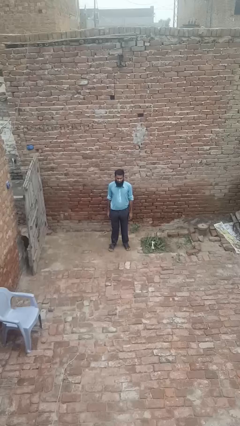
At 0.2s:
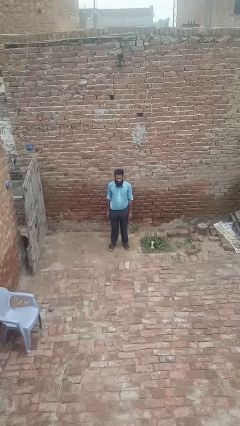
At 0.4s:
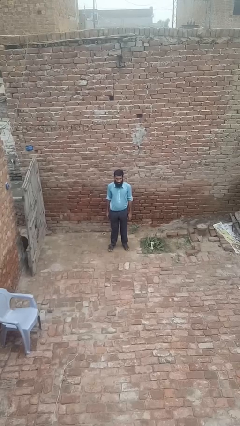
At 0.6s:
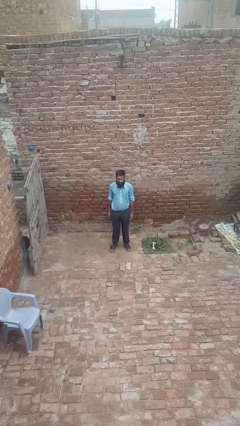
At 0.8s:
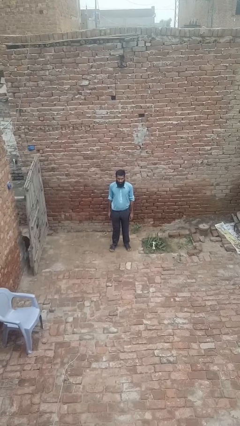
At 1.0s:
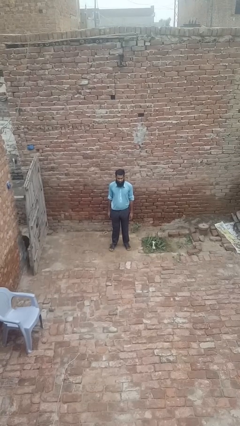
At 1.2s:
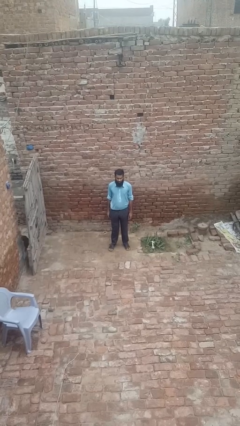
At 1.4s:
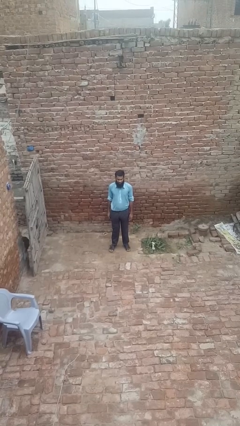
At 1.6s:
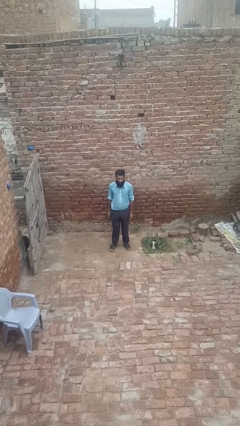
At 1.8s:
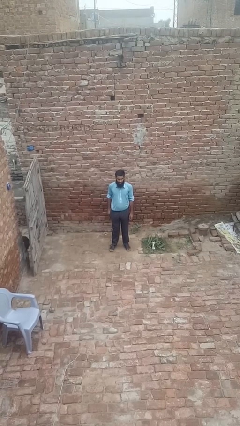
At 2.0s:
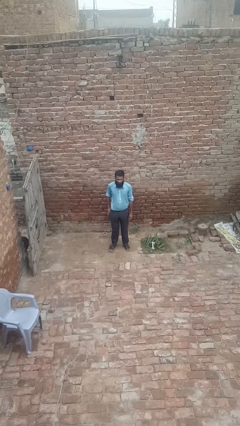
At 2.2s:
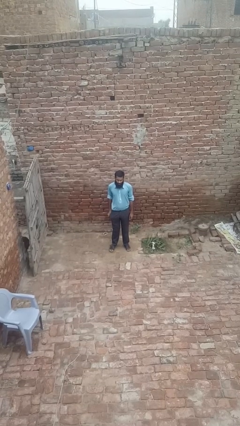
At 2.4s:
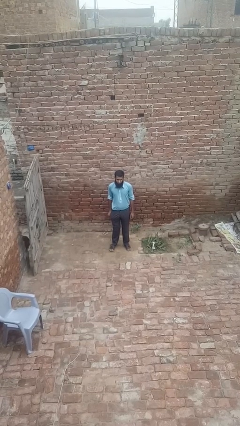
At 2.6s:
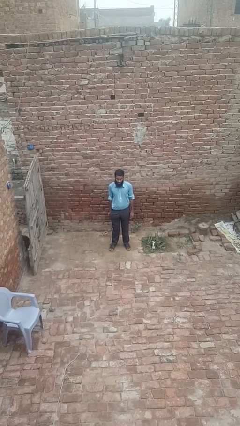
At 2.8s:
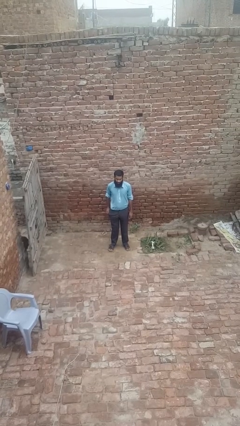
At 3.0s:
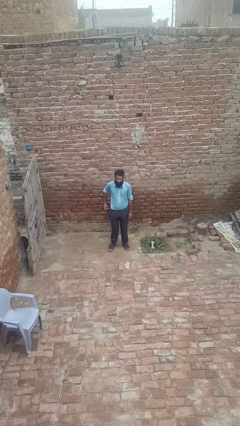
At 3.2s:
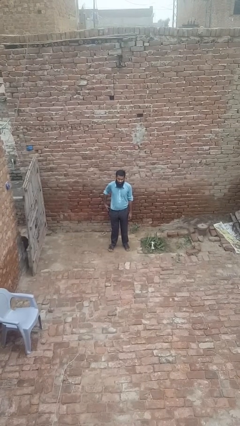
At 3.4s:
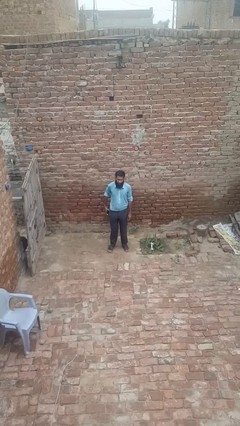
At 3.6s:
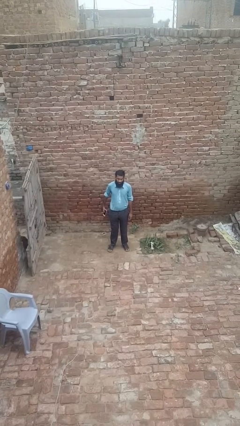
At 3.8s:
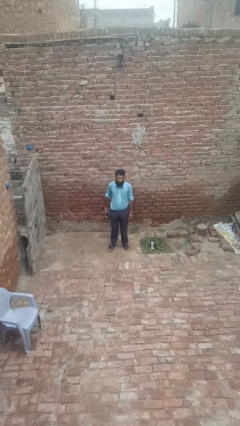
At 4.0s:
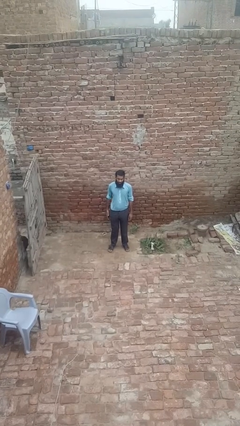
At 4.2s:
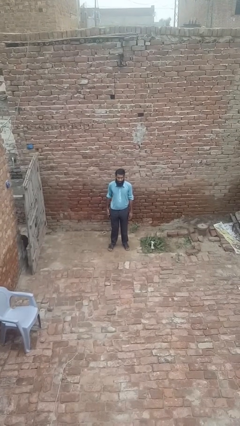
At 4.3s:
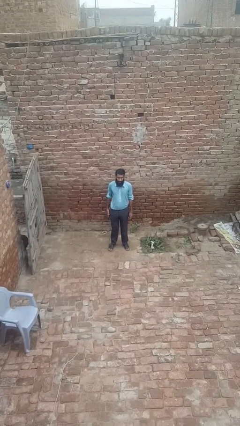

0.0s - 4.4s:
person takes phone from pocket

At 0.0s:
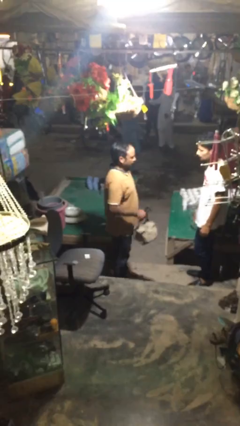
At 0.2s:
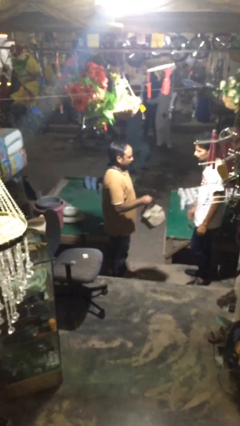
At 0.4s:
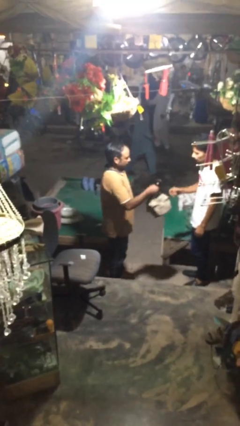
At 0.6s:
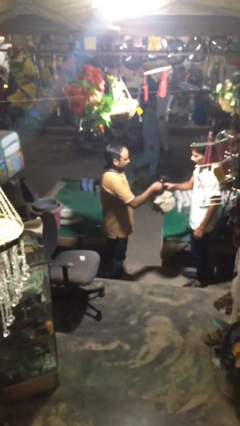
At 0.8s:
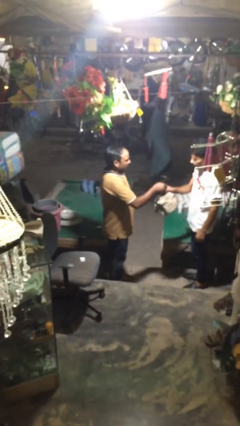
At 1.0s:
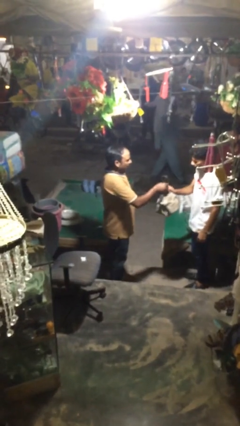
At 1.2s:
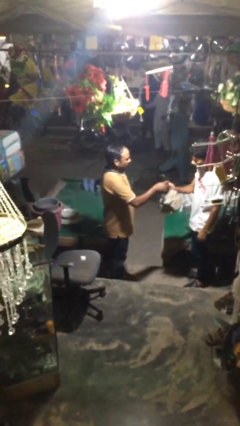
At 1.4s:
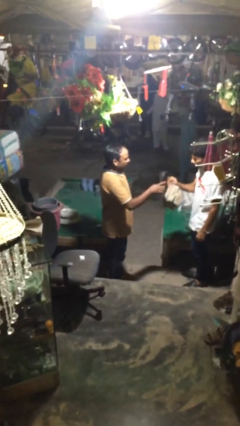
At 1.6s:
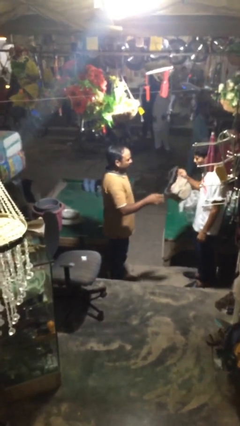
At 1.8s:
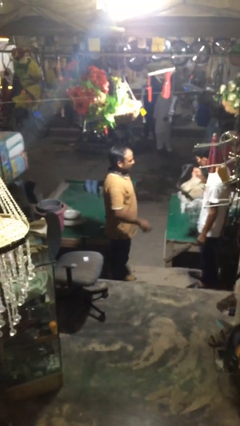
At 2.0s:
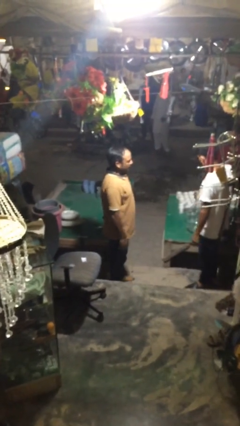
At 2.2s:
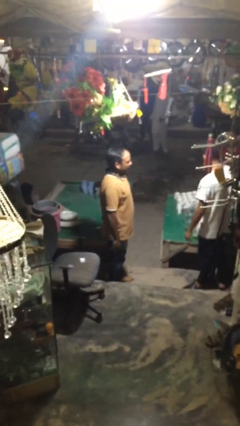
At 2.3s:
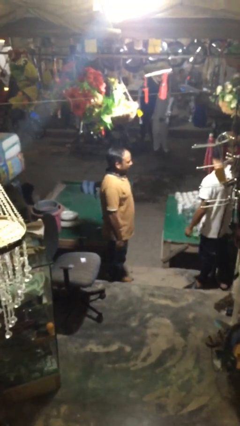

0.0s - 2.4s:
person transfers object to person

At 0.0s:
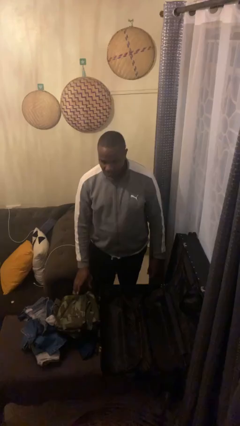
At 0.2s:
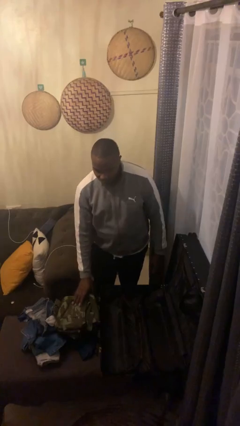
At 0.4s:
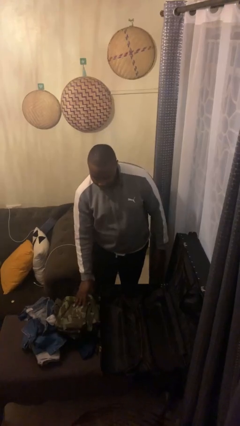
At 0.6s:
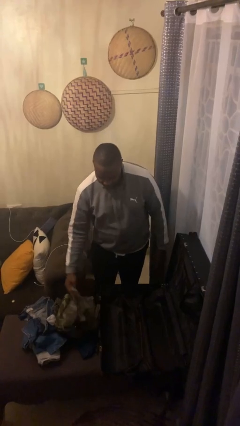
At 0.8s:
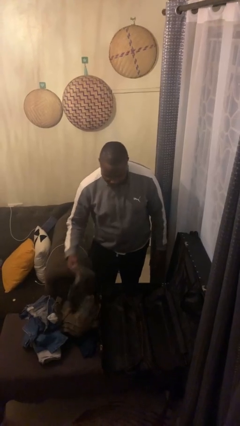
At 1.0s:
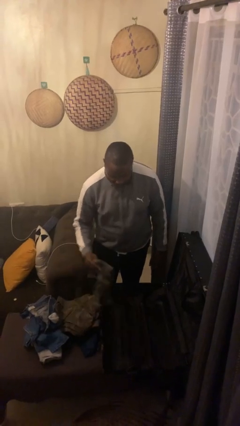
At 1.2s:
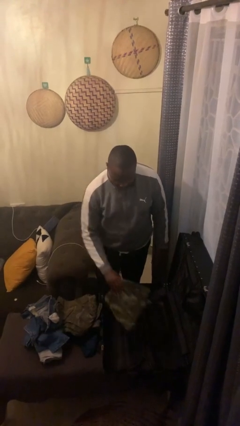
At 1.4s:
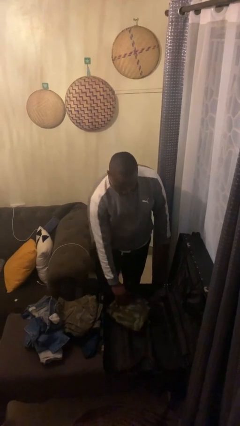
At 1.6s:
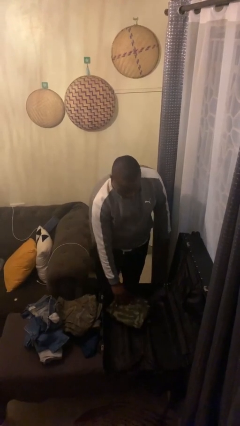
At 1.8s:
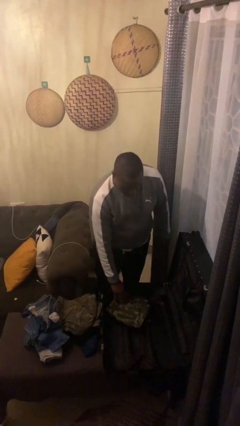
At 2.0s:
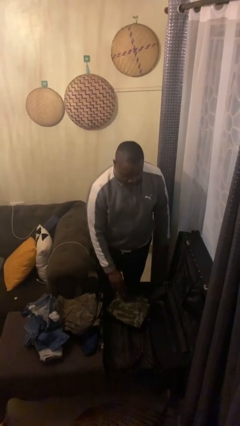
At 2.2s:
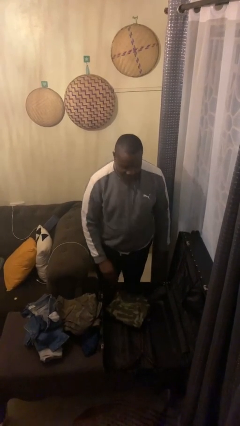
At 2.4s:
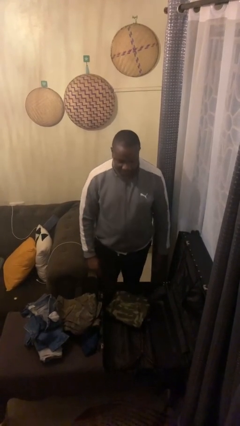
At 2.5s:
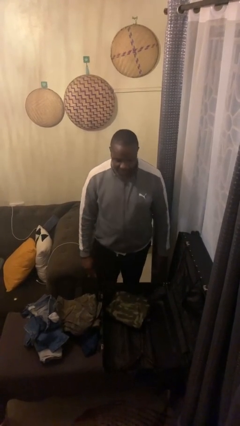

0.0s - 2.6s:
person loads clothes into suitcase

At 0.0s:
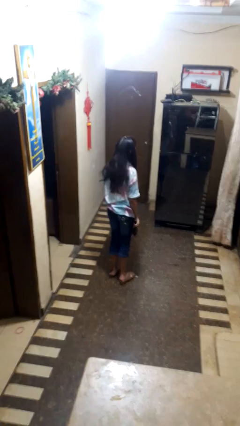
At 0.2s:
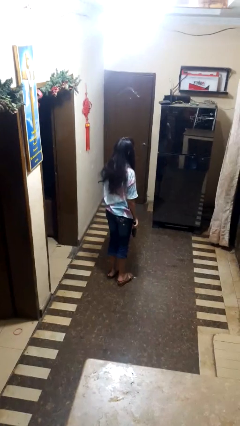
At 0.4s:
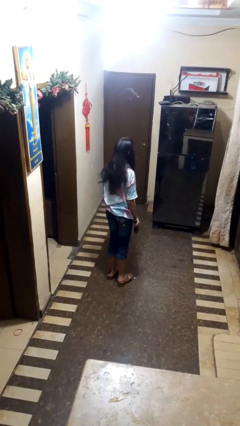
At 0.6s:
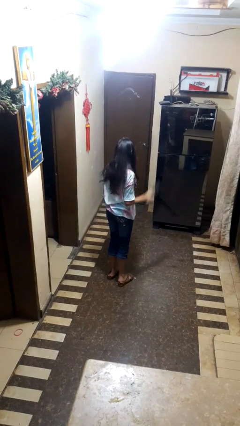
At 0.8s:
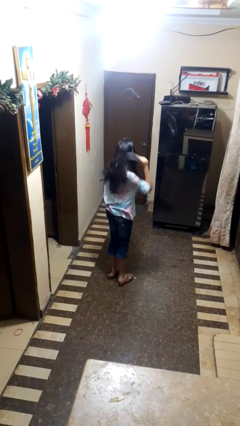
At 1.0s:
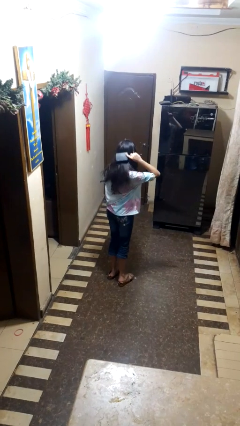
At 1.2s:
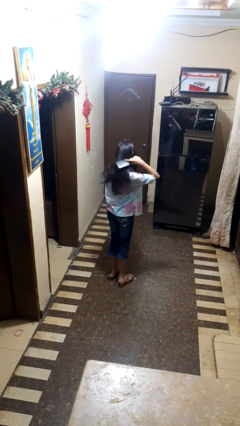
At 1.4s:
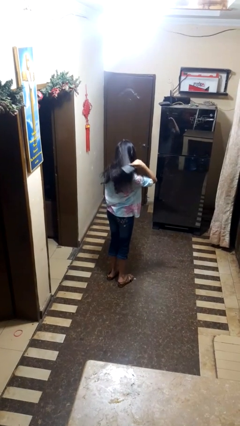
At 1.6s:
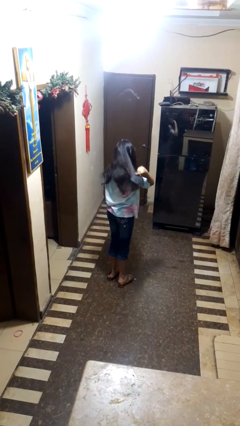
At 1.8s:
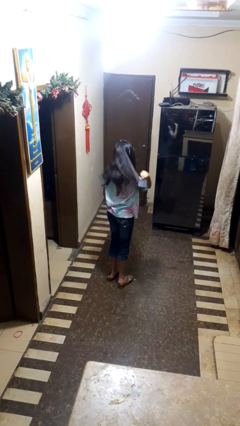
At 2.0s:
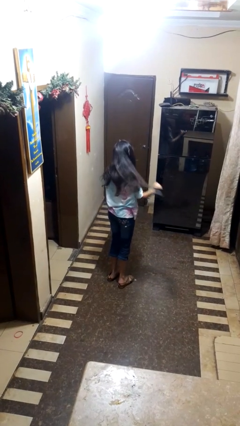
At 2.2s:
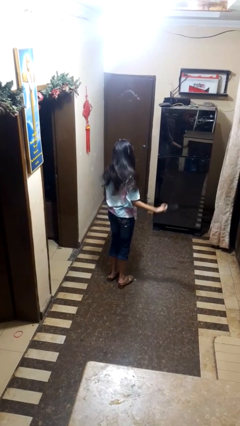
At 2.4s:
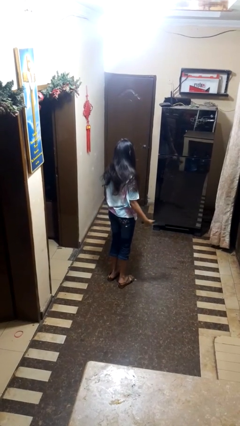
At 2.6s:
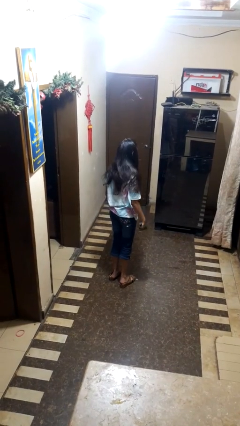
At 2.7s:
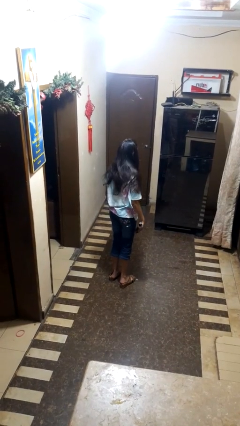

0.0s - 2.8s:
person brushes hair

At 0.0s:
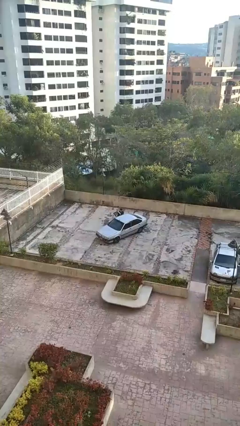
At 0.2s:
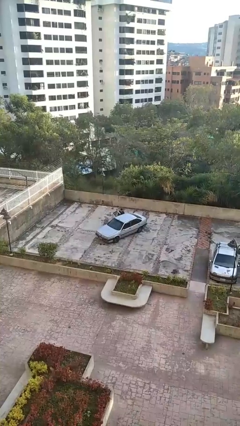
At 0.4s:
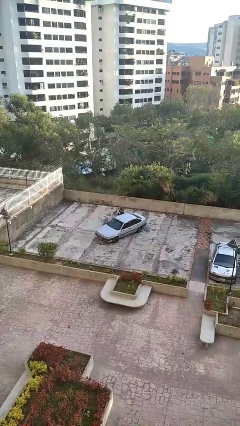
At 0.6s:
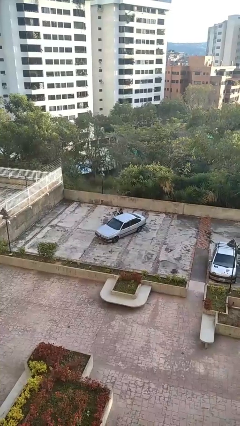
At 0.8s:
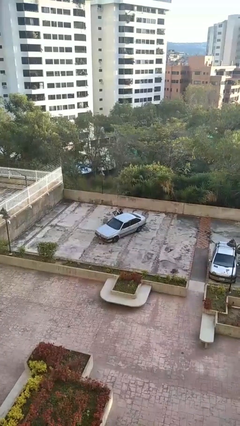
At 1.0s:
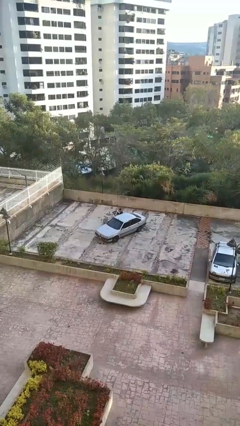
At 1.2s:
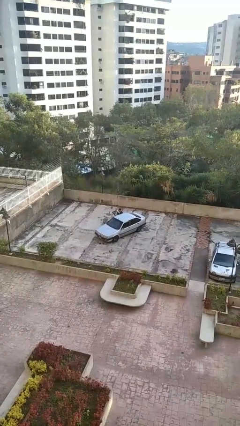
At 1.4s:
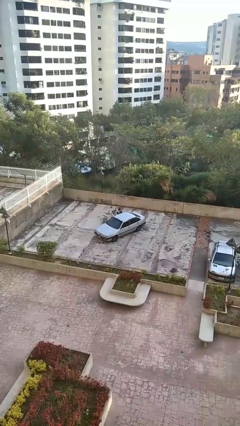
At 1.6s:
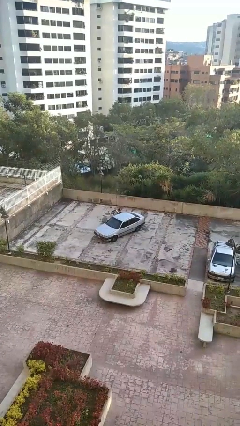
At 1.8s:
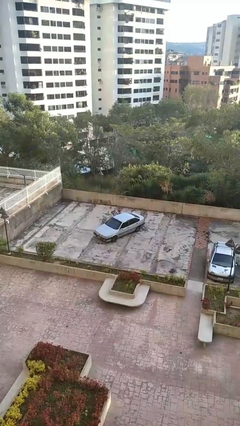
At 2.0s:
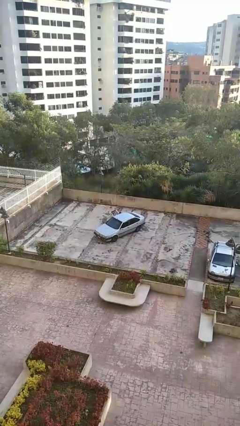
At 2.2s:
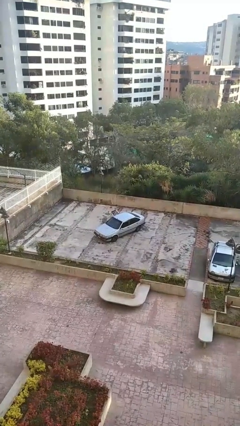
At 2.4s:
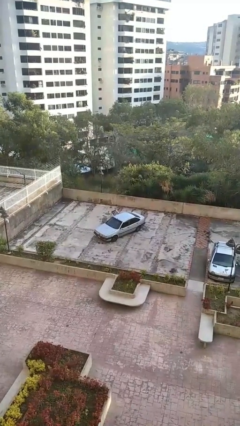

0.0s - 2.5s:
person enters car

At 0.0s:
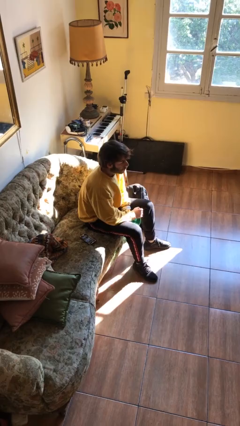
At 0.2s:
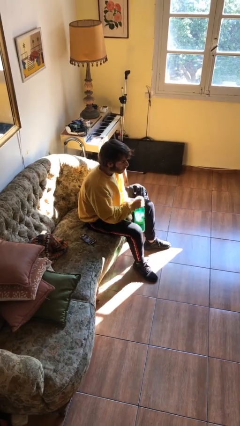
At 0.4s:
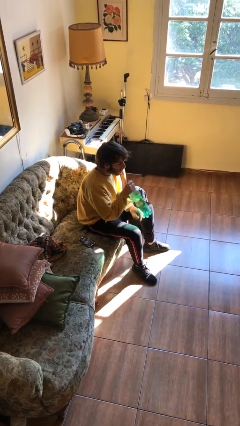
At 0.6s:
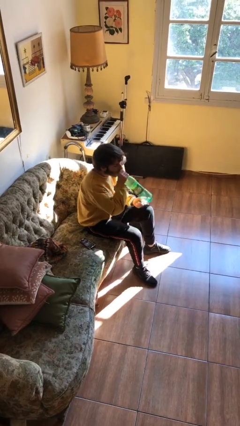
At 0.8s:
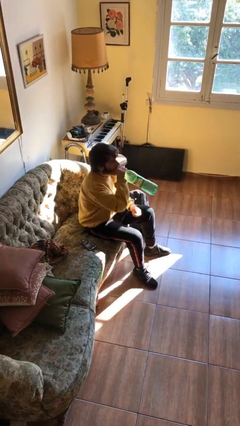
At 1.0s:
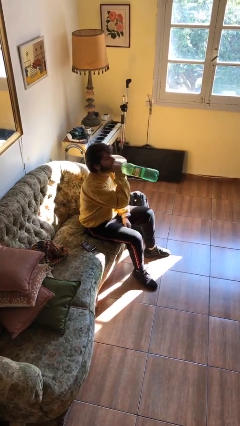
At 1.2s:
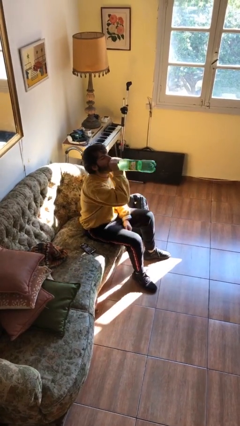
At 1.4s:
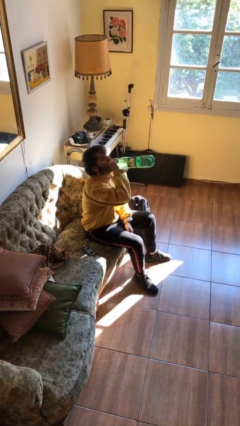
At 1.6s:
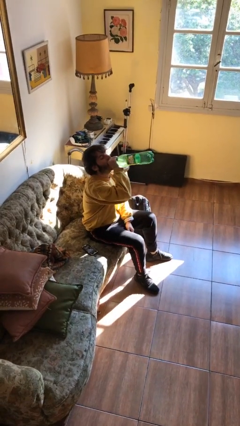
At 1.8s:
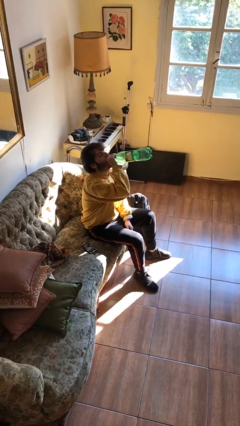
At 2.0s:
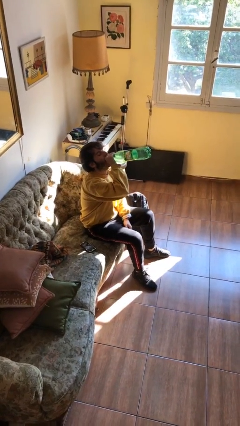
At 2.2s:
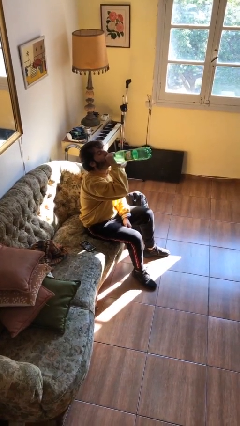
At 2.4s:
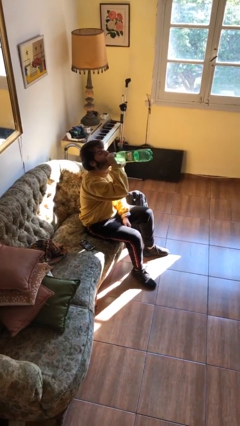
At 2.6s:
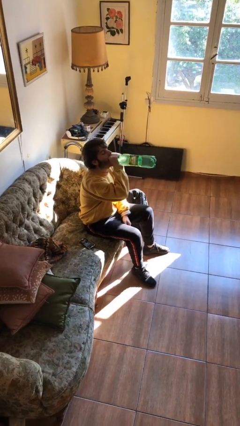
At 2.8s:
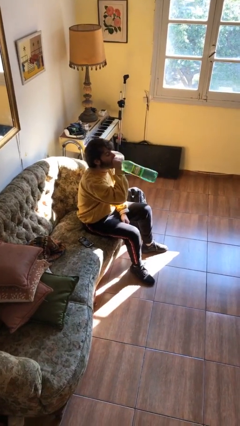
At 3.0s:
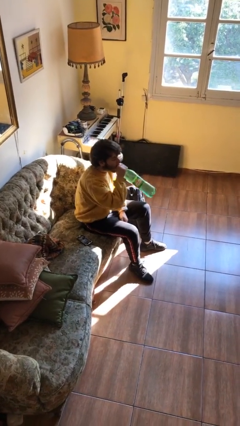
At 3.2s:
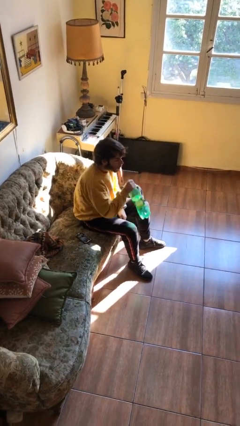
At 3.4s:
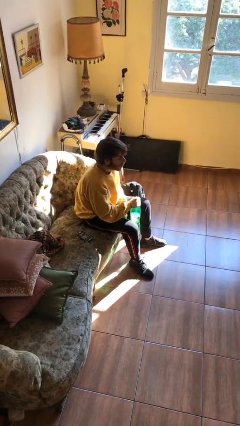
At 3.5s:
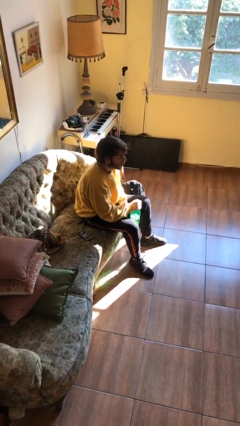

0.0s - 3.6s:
person drinks from bottle
